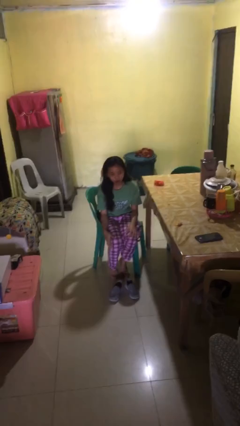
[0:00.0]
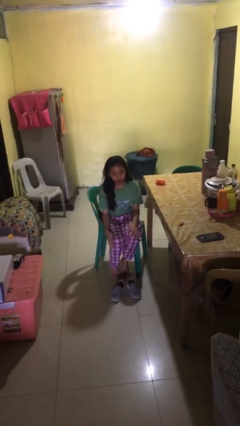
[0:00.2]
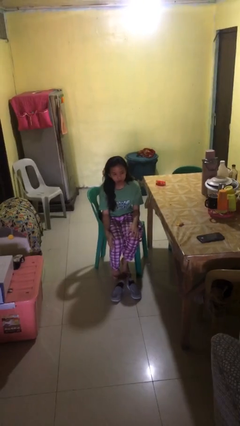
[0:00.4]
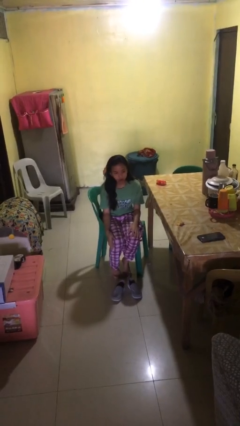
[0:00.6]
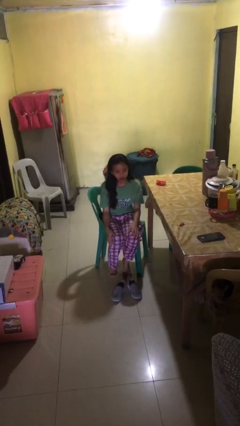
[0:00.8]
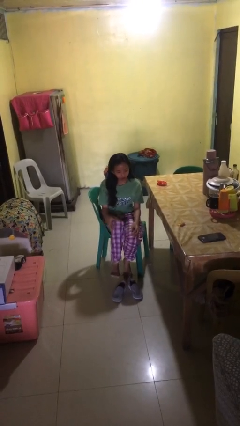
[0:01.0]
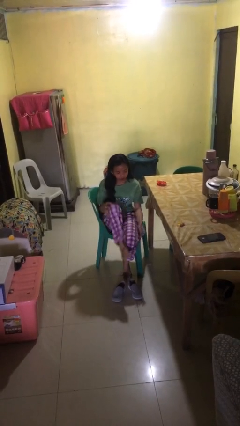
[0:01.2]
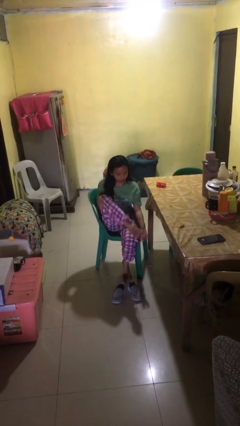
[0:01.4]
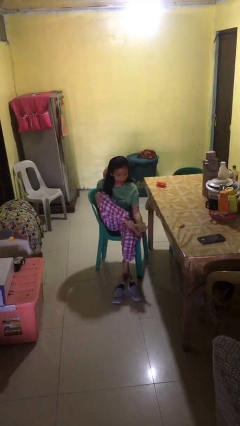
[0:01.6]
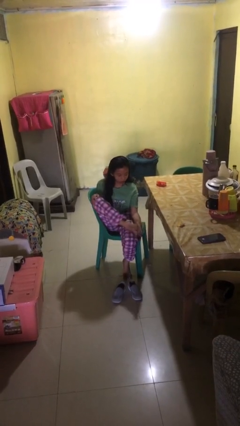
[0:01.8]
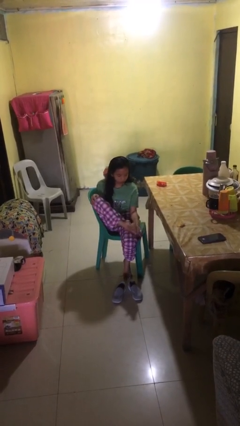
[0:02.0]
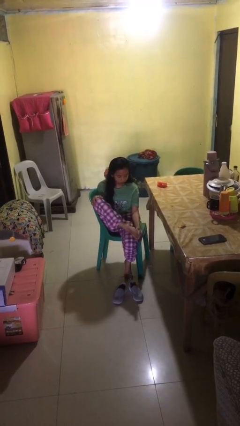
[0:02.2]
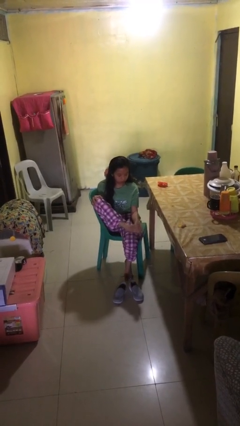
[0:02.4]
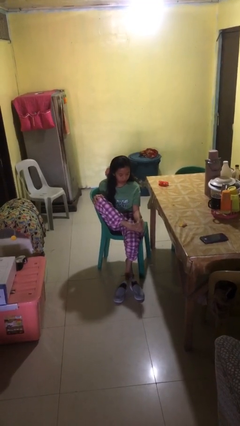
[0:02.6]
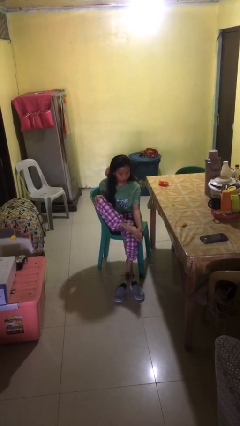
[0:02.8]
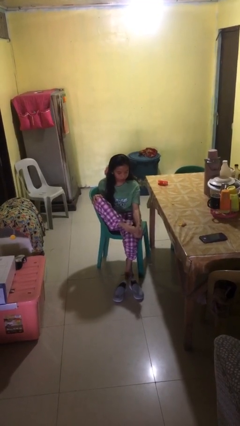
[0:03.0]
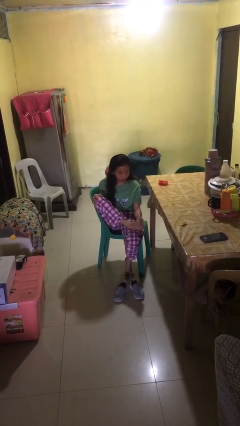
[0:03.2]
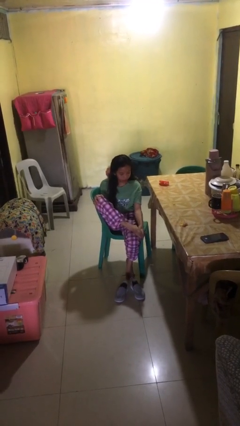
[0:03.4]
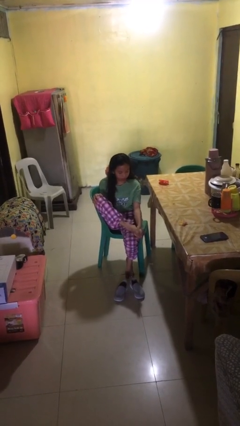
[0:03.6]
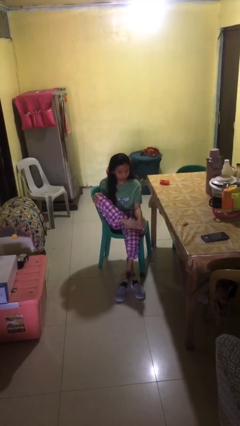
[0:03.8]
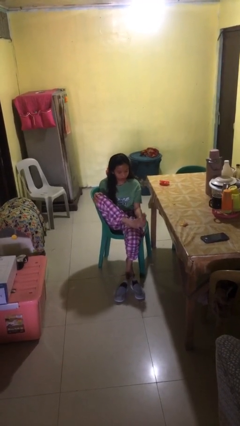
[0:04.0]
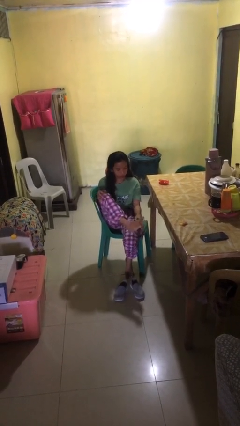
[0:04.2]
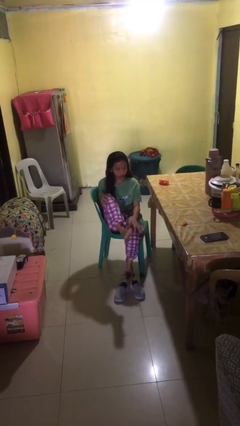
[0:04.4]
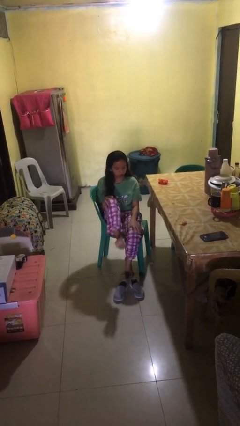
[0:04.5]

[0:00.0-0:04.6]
person rubs foot

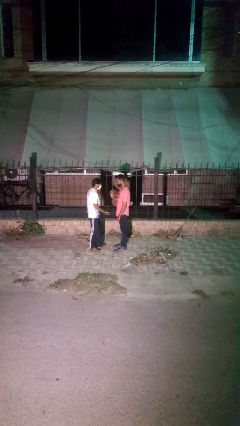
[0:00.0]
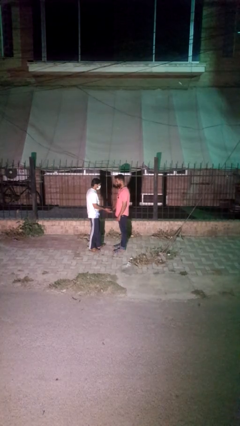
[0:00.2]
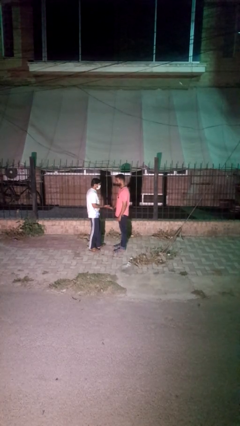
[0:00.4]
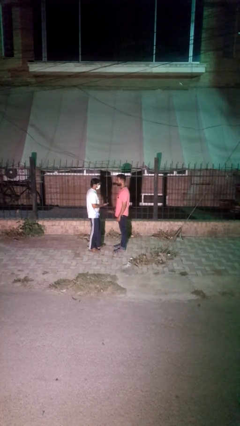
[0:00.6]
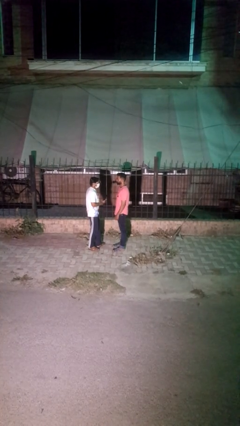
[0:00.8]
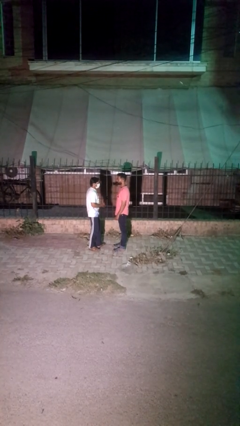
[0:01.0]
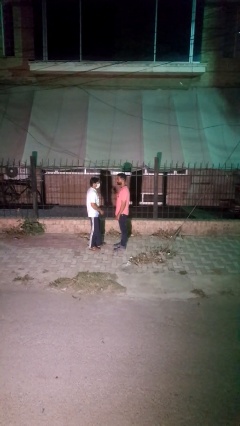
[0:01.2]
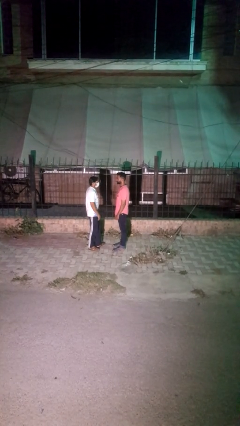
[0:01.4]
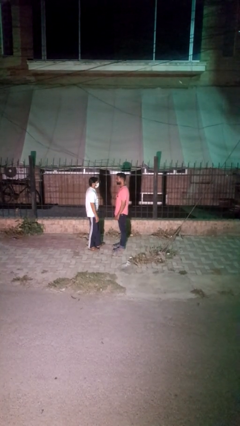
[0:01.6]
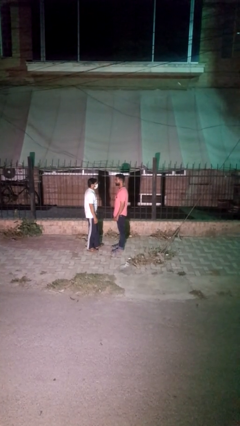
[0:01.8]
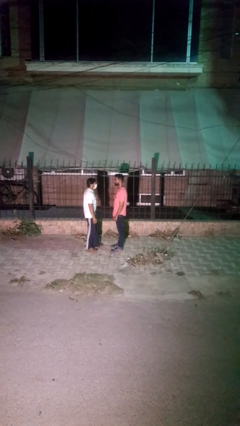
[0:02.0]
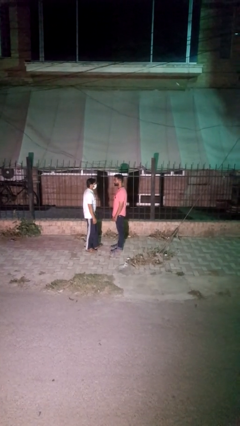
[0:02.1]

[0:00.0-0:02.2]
person highfives hand

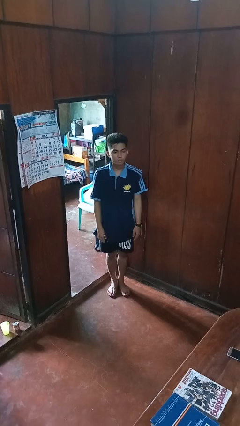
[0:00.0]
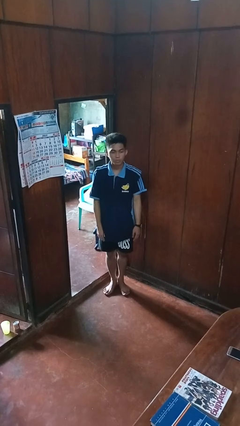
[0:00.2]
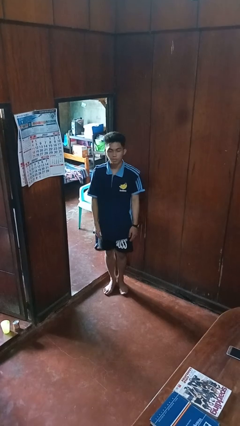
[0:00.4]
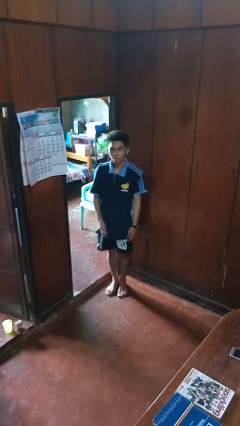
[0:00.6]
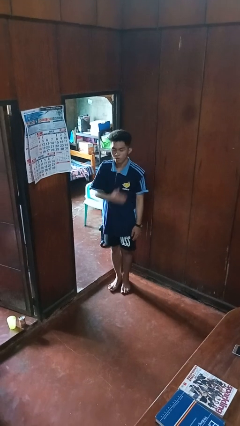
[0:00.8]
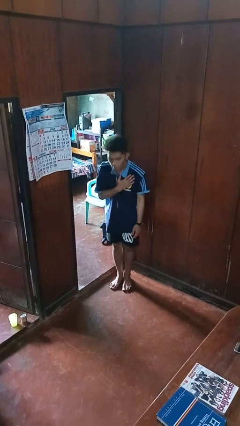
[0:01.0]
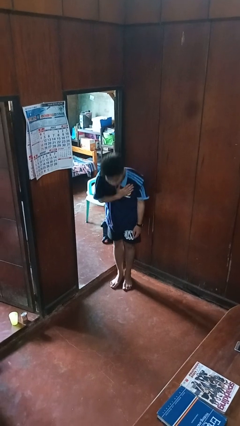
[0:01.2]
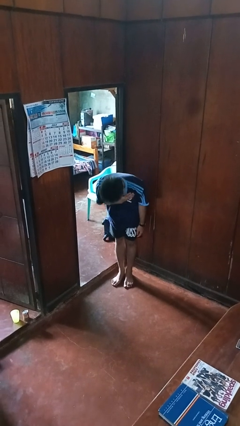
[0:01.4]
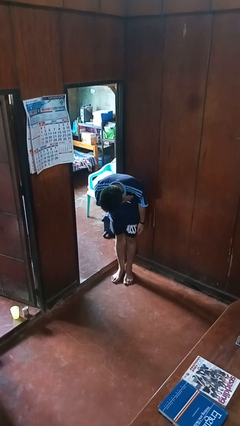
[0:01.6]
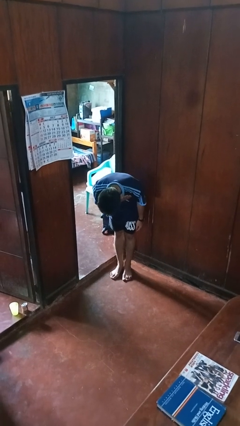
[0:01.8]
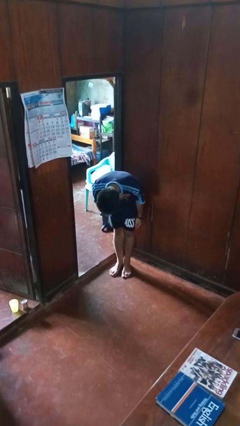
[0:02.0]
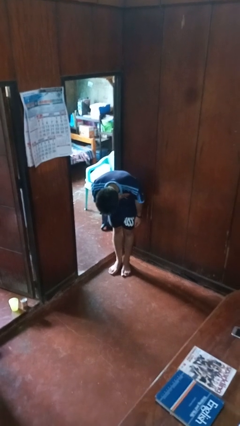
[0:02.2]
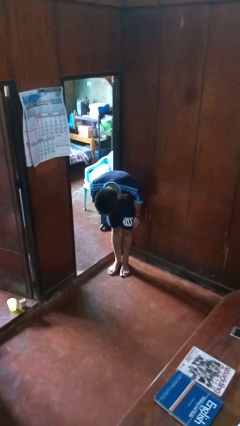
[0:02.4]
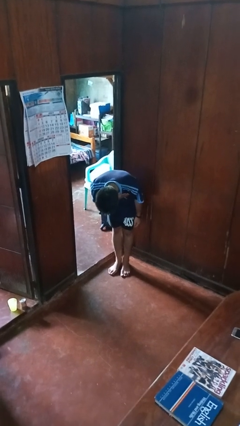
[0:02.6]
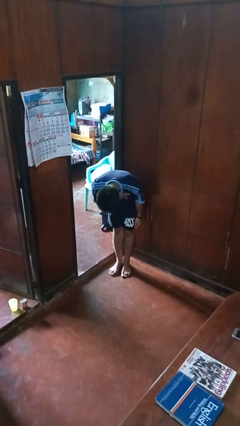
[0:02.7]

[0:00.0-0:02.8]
person bows

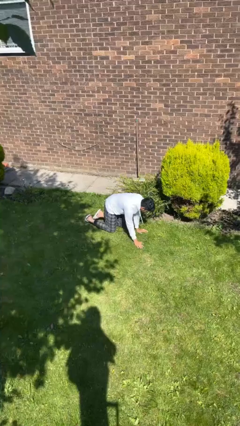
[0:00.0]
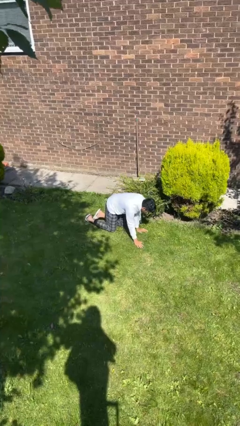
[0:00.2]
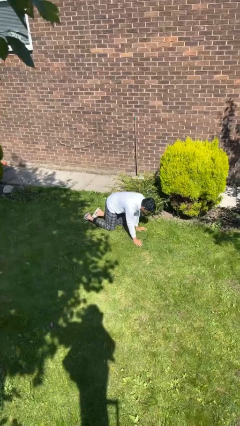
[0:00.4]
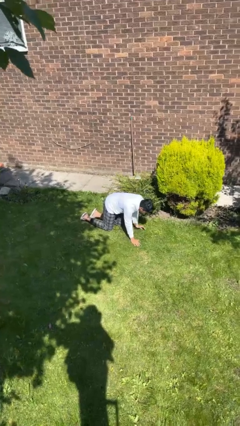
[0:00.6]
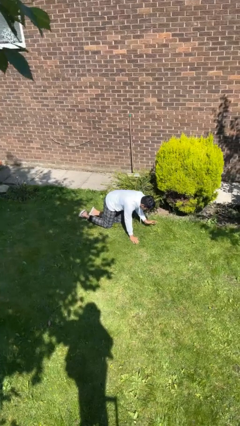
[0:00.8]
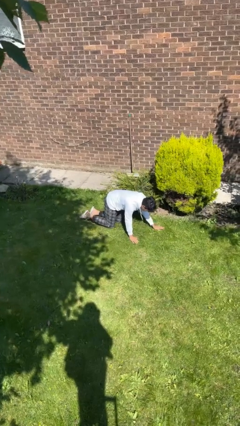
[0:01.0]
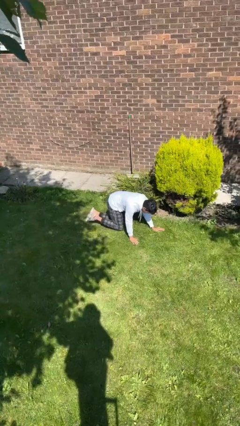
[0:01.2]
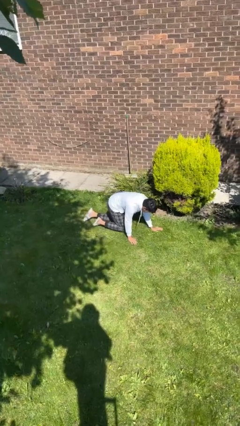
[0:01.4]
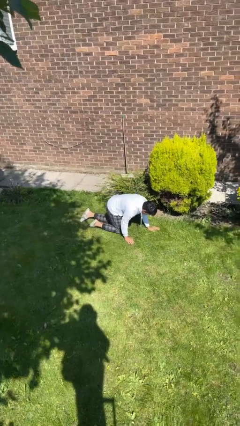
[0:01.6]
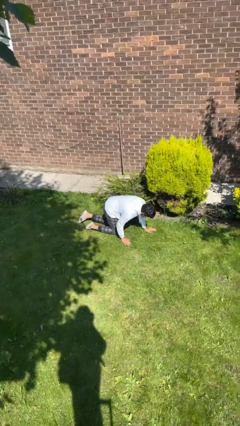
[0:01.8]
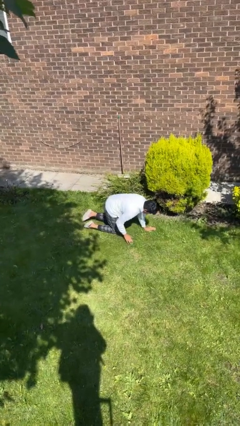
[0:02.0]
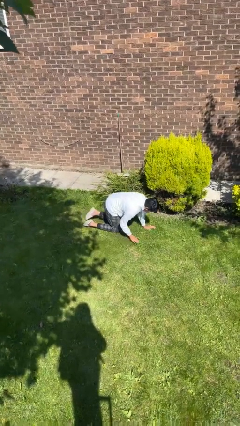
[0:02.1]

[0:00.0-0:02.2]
person crawls

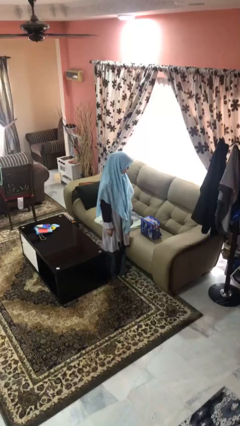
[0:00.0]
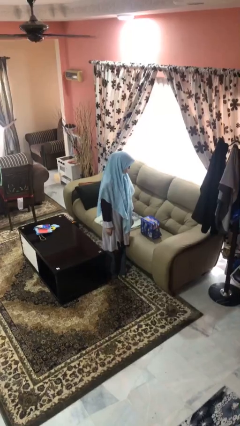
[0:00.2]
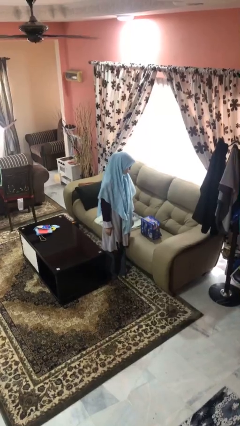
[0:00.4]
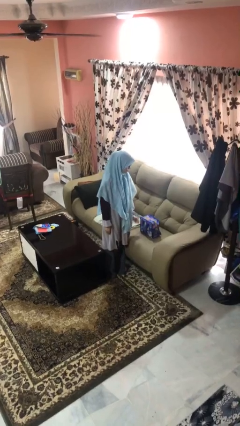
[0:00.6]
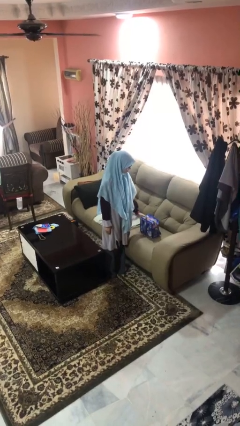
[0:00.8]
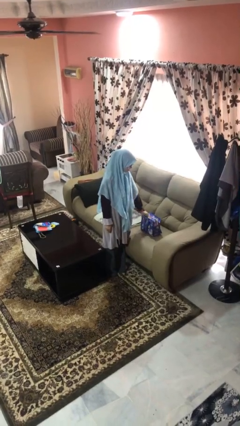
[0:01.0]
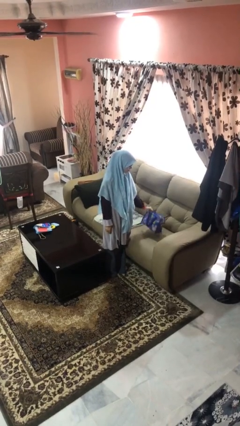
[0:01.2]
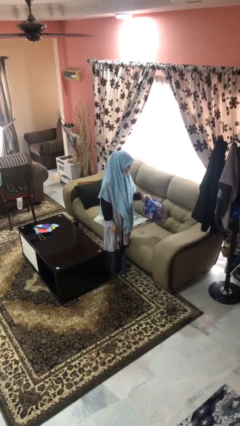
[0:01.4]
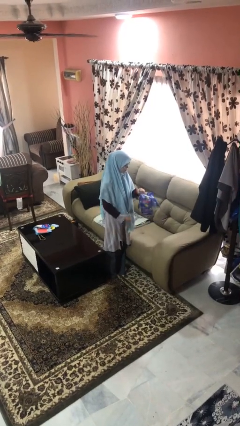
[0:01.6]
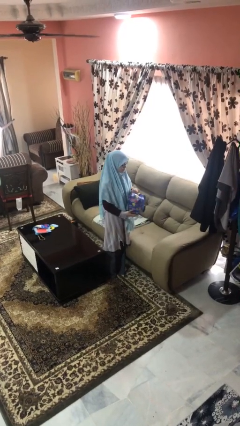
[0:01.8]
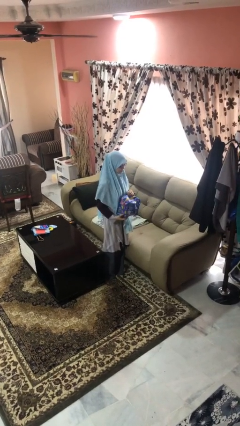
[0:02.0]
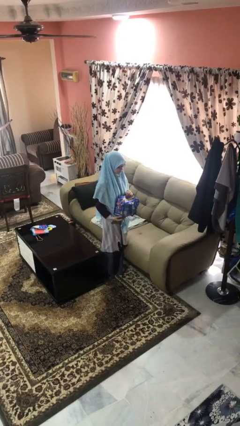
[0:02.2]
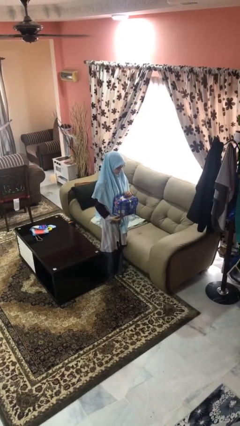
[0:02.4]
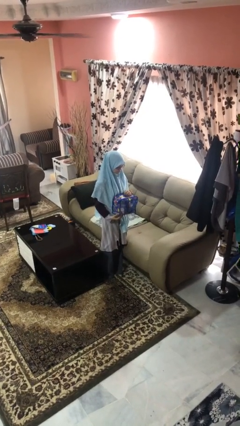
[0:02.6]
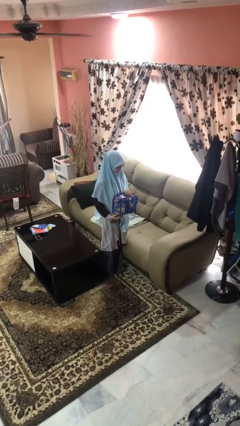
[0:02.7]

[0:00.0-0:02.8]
person picks up object from couch

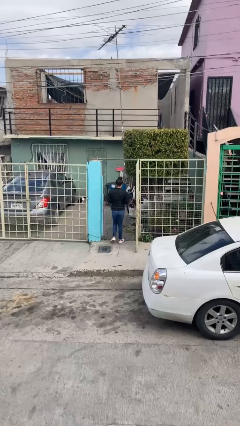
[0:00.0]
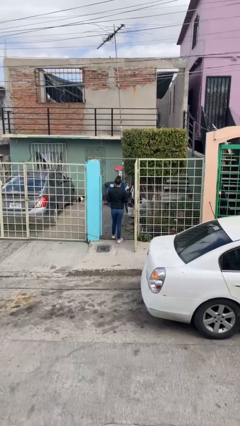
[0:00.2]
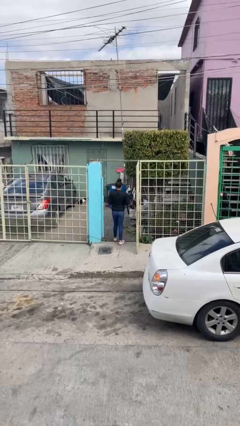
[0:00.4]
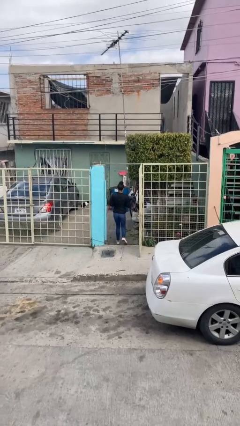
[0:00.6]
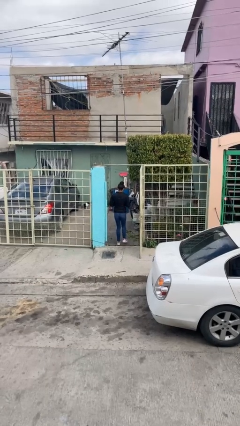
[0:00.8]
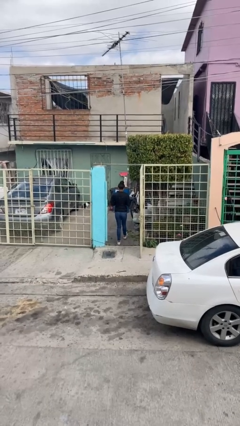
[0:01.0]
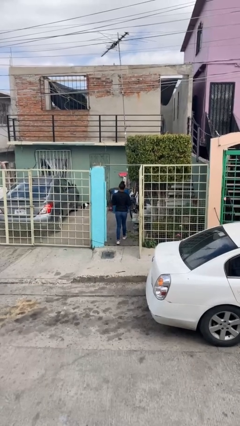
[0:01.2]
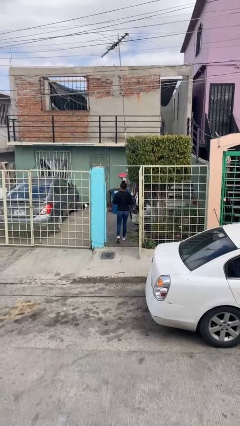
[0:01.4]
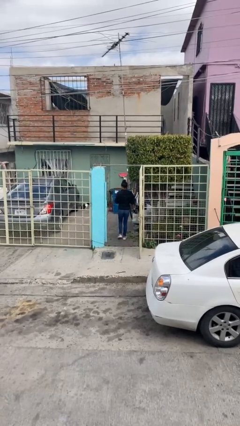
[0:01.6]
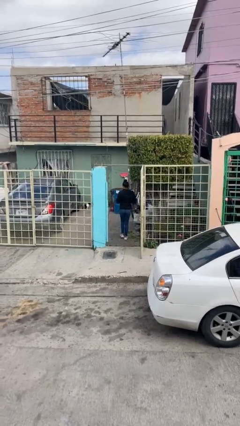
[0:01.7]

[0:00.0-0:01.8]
person exits scene through structure

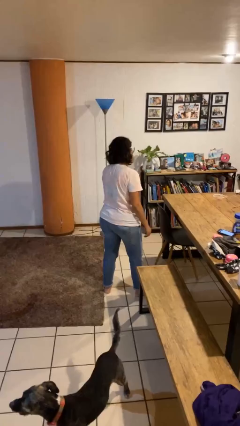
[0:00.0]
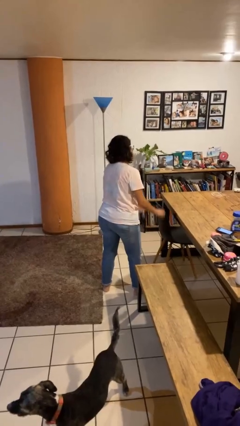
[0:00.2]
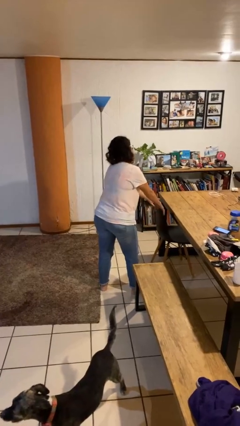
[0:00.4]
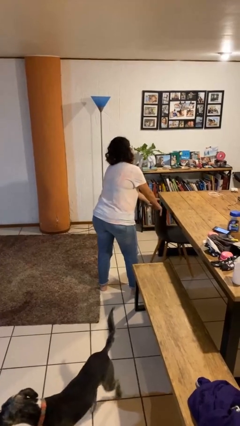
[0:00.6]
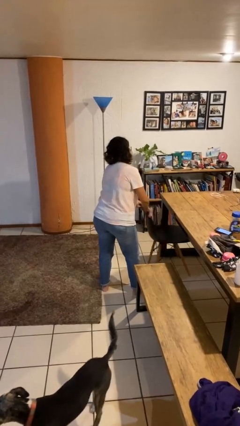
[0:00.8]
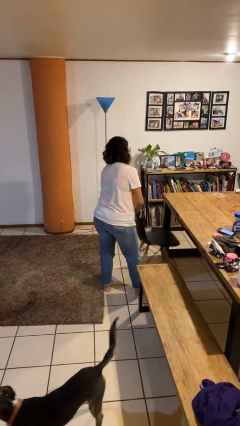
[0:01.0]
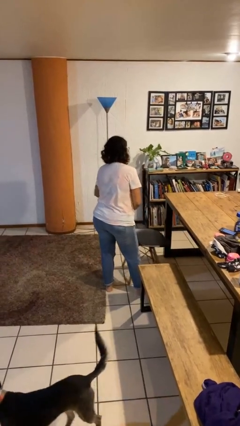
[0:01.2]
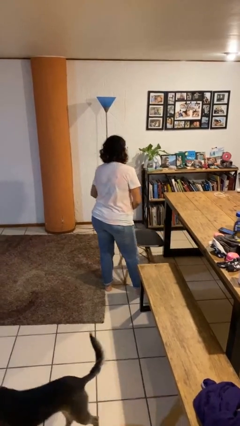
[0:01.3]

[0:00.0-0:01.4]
person pulls out chair
